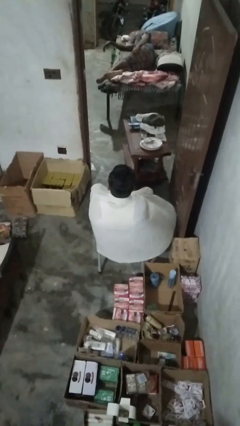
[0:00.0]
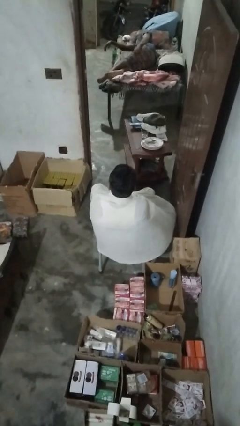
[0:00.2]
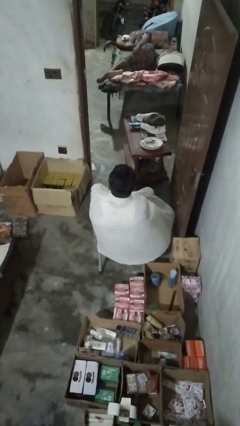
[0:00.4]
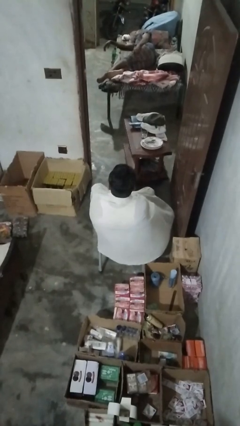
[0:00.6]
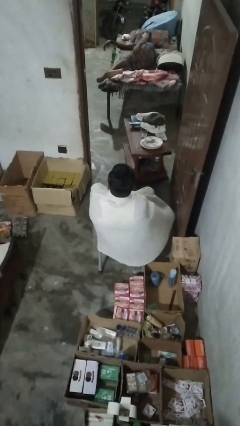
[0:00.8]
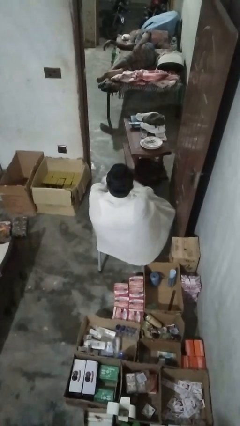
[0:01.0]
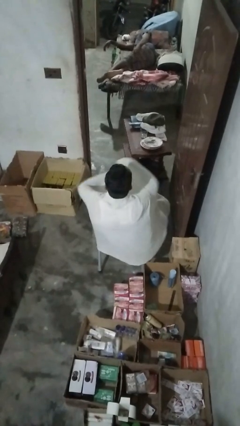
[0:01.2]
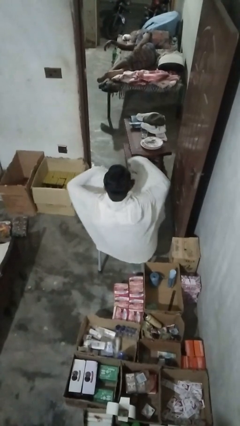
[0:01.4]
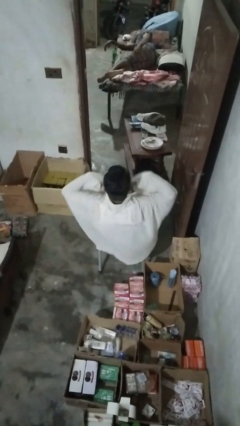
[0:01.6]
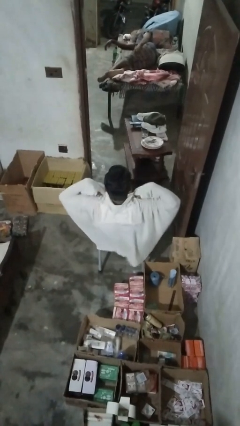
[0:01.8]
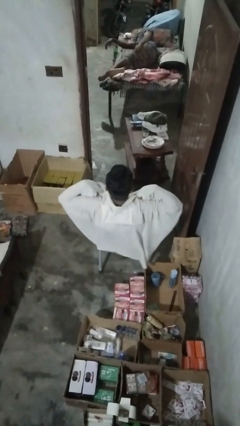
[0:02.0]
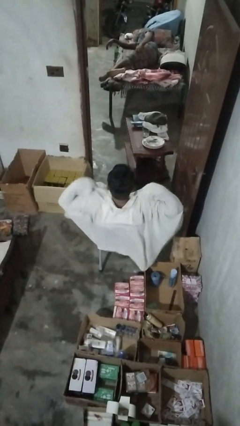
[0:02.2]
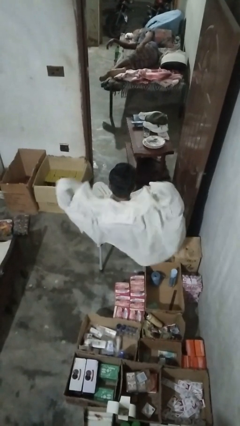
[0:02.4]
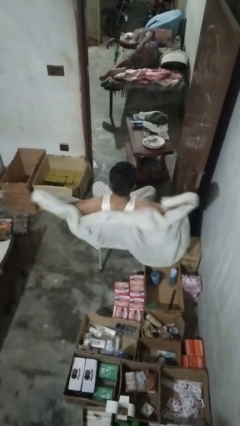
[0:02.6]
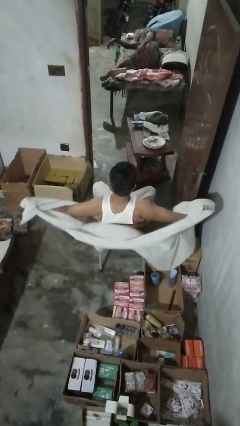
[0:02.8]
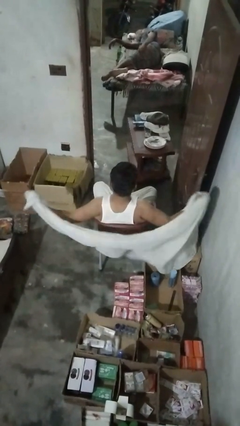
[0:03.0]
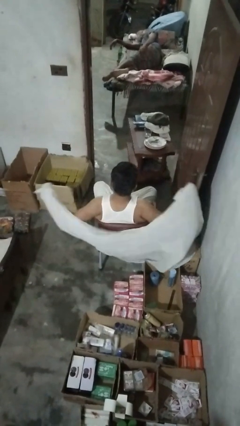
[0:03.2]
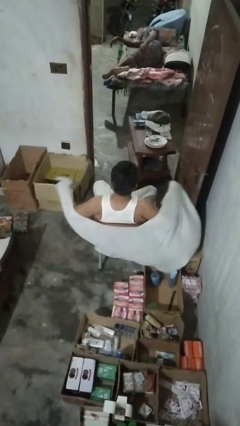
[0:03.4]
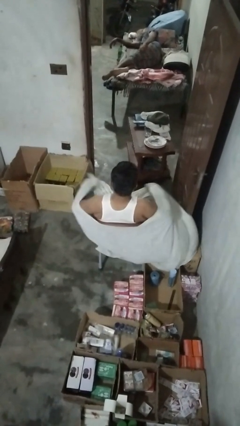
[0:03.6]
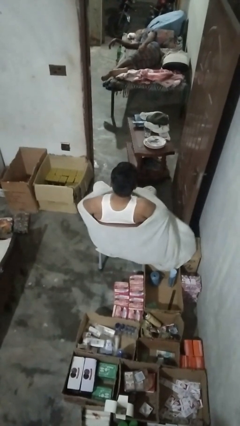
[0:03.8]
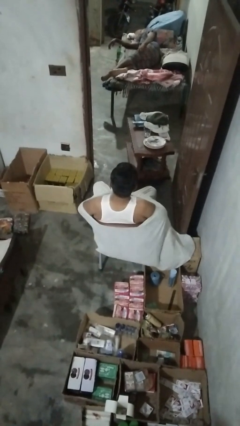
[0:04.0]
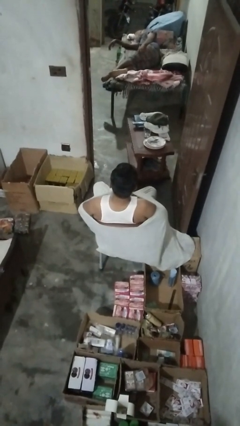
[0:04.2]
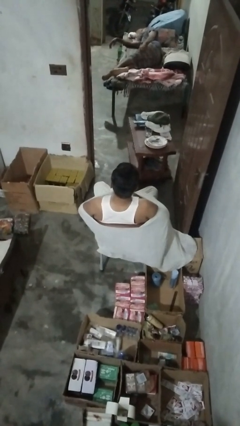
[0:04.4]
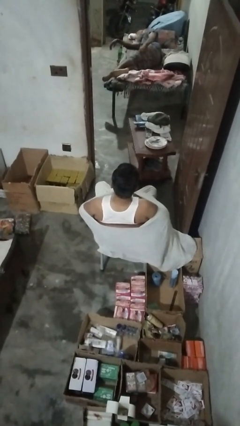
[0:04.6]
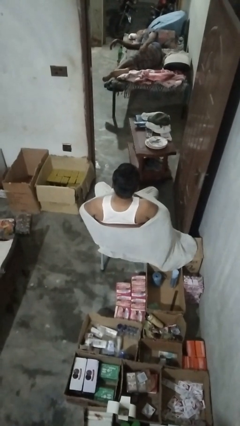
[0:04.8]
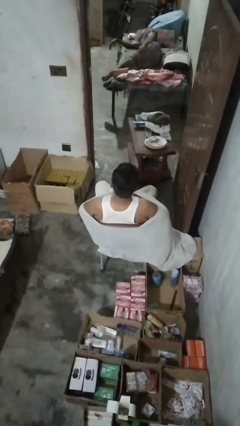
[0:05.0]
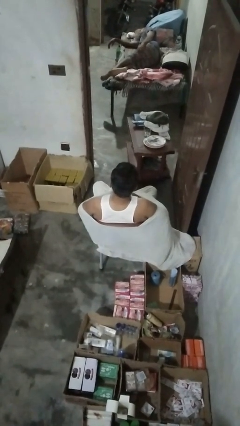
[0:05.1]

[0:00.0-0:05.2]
person uncovers with blanket

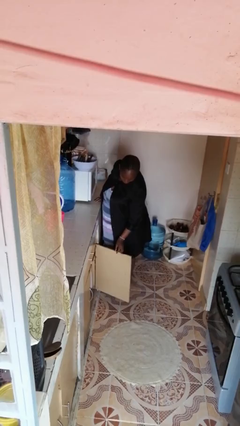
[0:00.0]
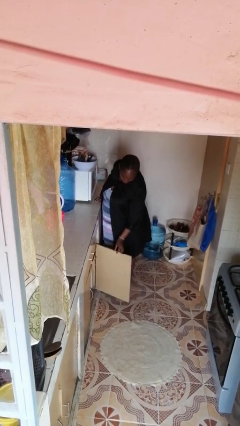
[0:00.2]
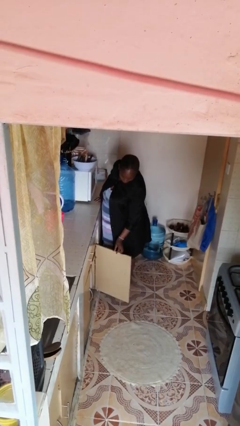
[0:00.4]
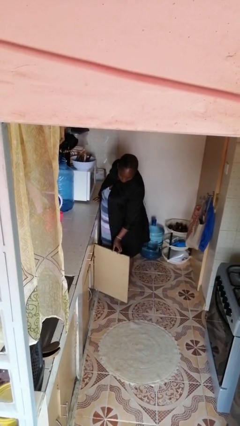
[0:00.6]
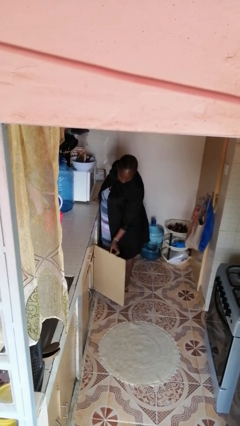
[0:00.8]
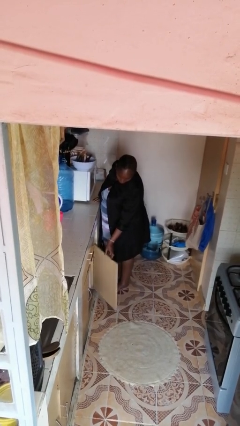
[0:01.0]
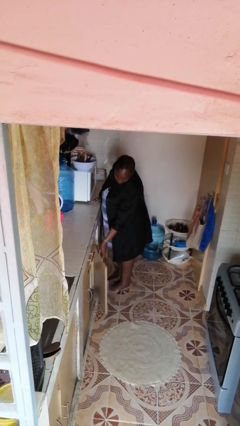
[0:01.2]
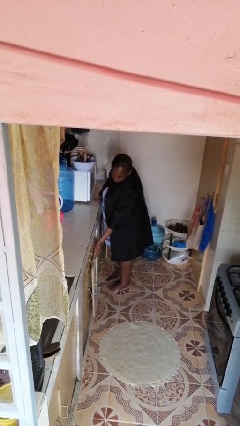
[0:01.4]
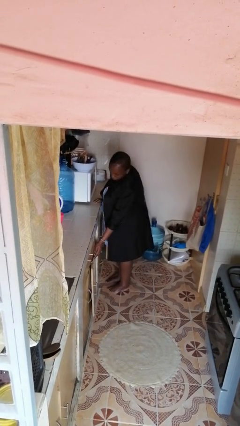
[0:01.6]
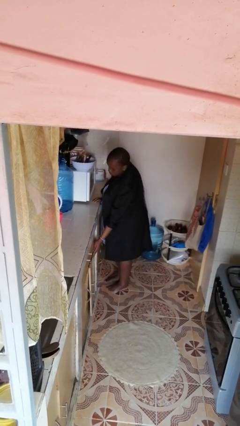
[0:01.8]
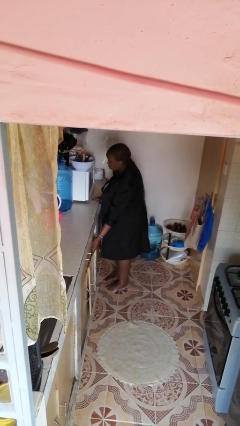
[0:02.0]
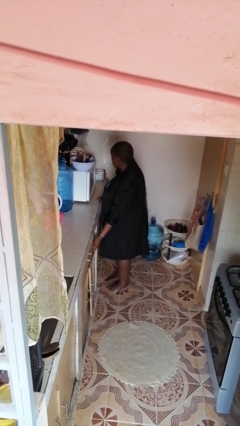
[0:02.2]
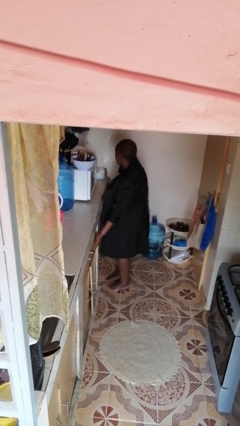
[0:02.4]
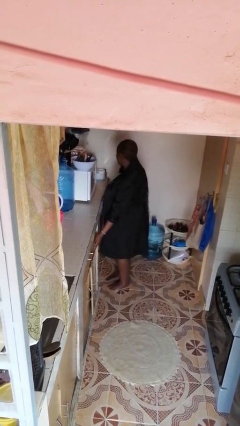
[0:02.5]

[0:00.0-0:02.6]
person closes cabinet

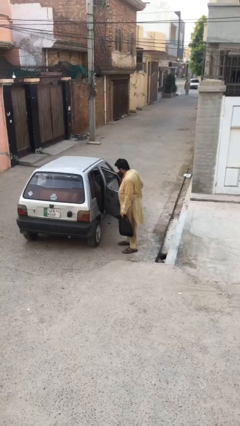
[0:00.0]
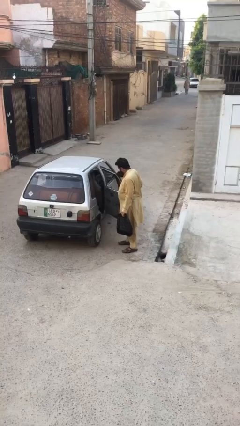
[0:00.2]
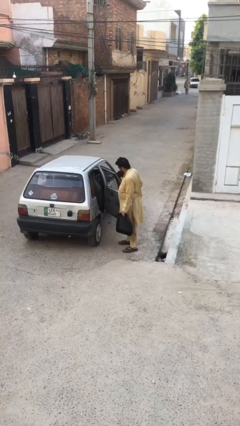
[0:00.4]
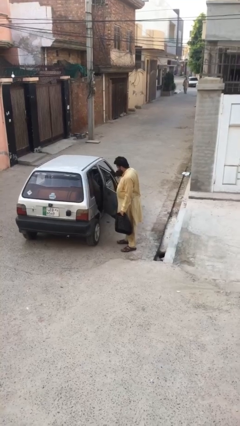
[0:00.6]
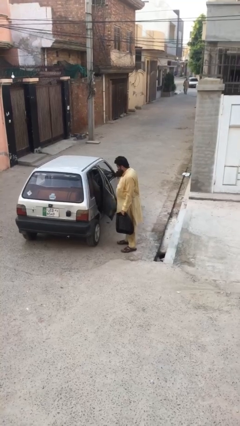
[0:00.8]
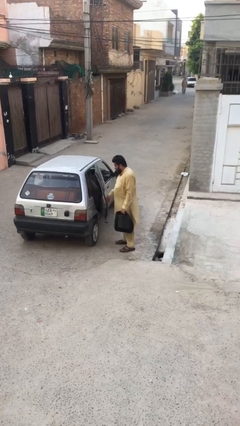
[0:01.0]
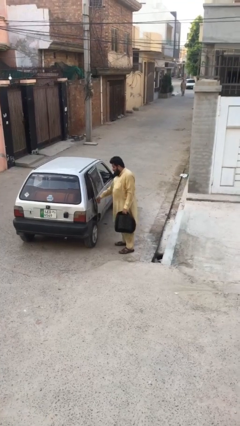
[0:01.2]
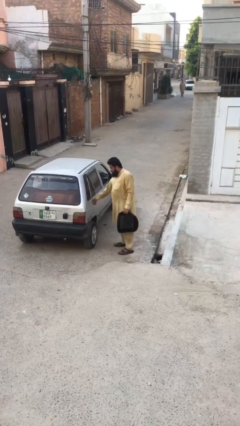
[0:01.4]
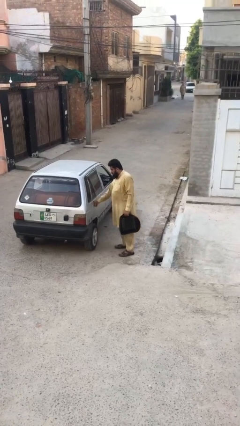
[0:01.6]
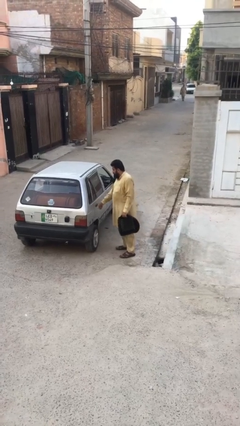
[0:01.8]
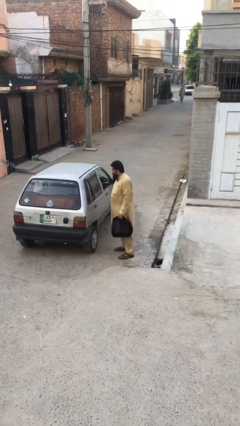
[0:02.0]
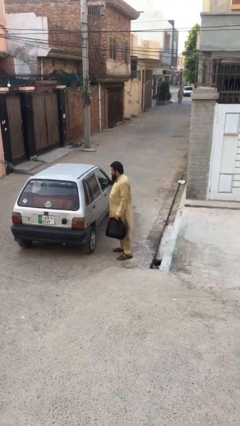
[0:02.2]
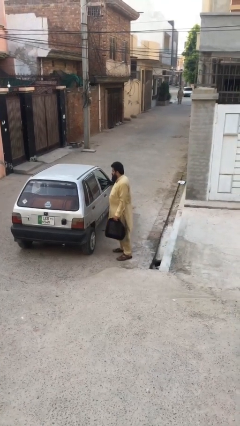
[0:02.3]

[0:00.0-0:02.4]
person closes car door

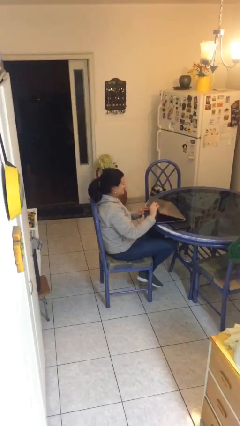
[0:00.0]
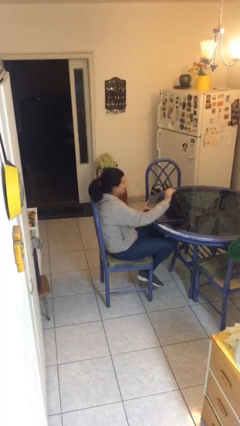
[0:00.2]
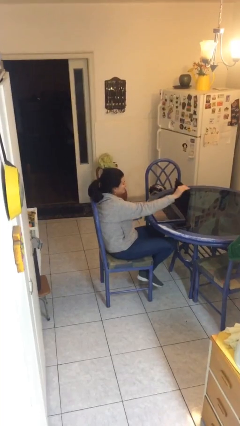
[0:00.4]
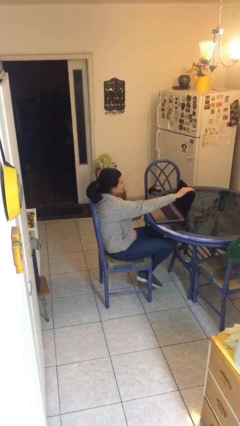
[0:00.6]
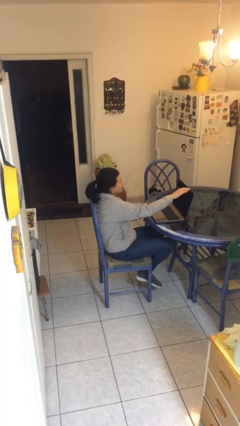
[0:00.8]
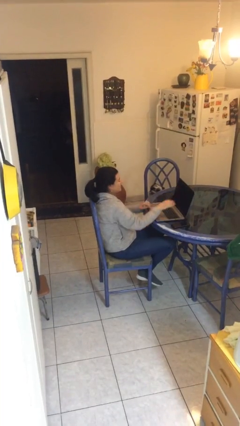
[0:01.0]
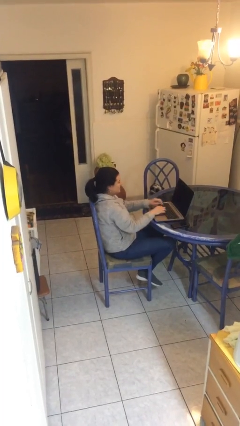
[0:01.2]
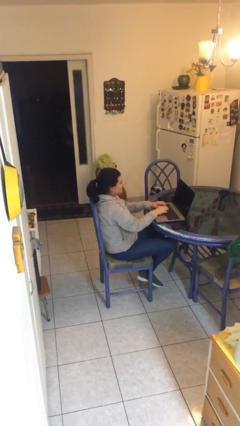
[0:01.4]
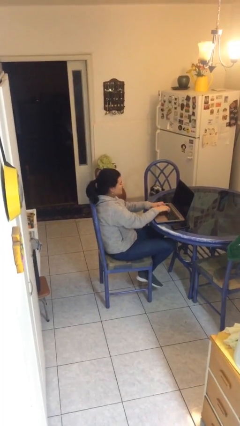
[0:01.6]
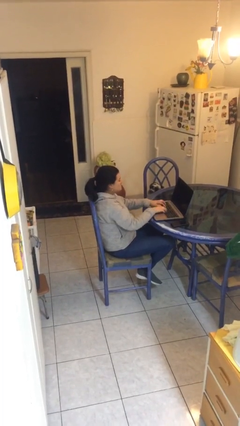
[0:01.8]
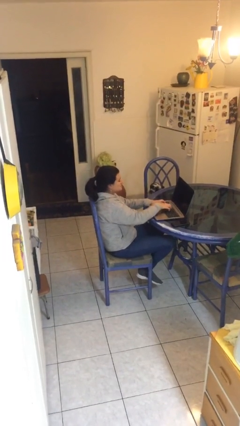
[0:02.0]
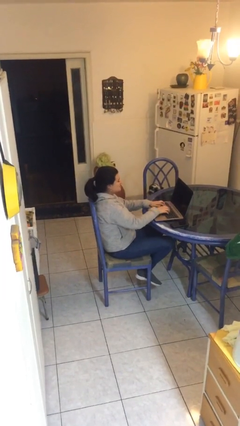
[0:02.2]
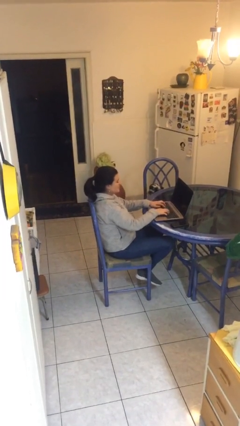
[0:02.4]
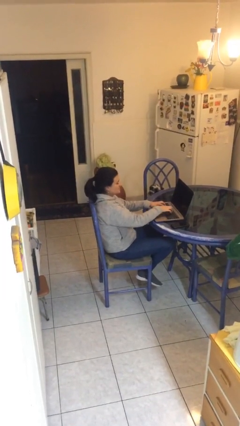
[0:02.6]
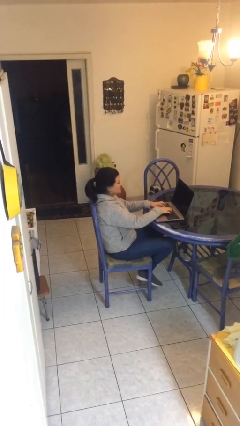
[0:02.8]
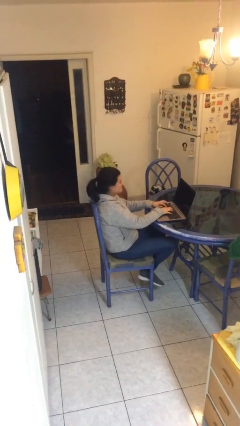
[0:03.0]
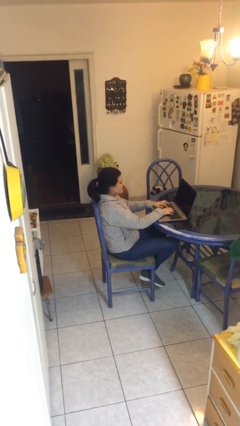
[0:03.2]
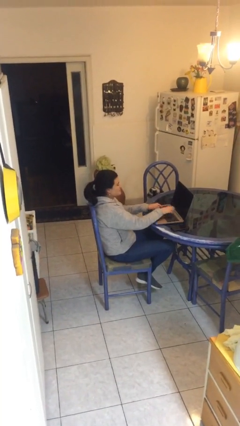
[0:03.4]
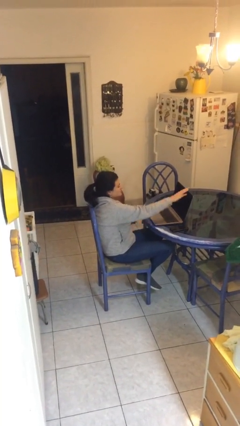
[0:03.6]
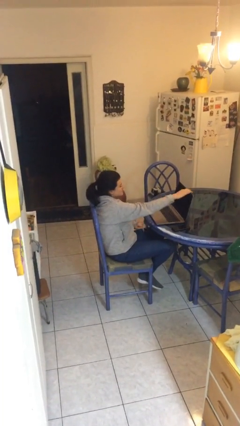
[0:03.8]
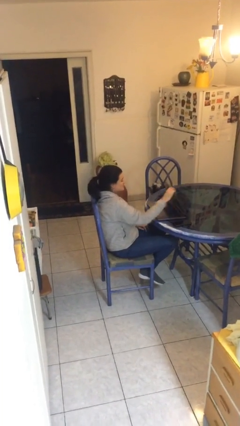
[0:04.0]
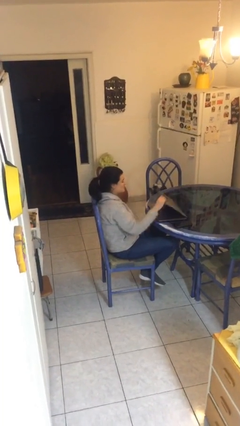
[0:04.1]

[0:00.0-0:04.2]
person interacts with laptop

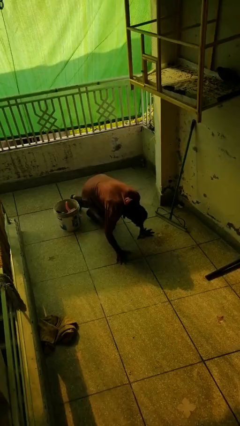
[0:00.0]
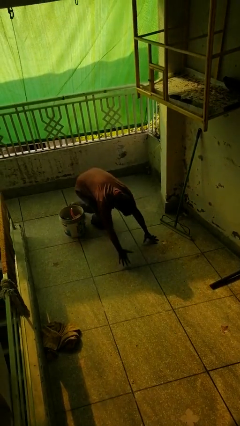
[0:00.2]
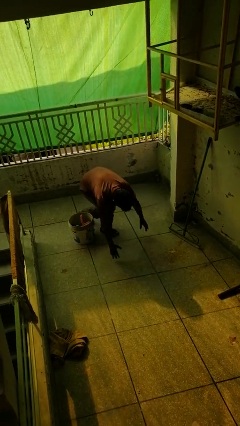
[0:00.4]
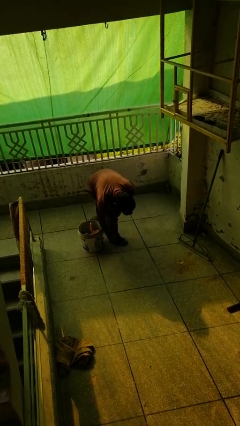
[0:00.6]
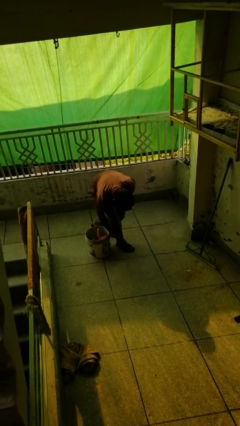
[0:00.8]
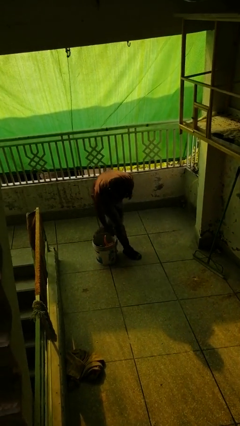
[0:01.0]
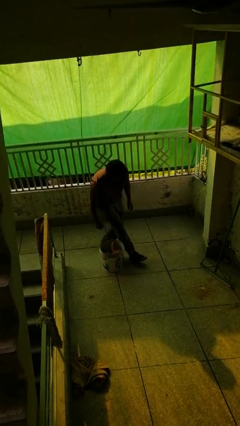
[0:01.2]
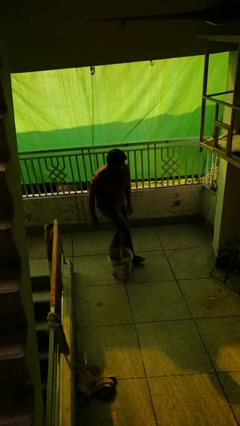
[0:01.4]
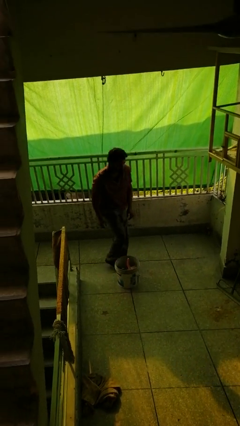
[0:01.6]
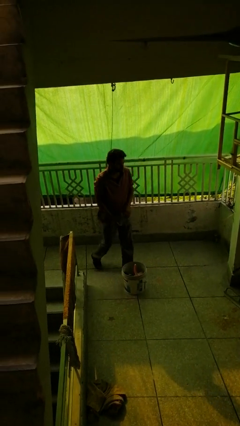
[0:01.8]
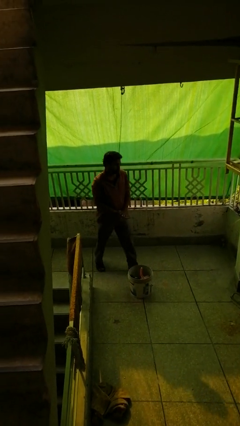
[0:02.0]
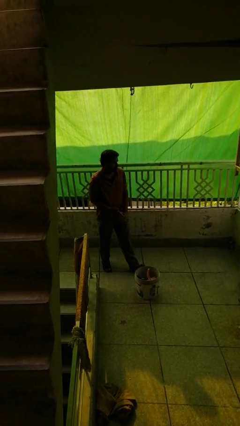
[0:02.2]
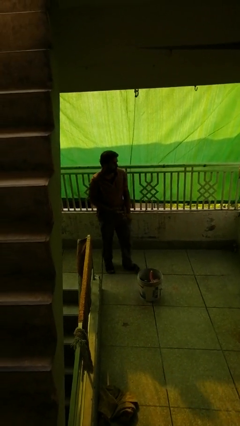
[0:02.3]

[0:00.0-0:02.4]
person stands up from floor

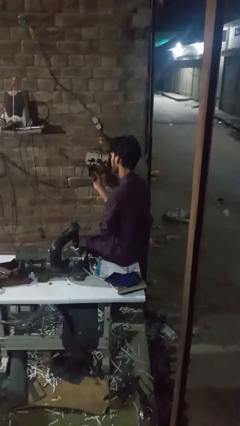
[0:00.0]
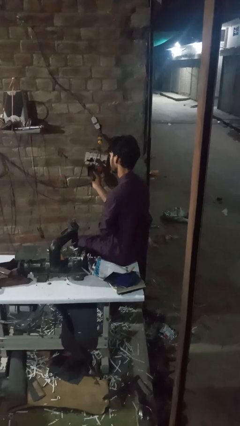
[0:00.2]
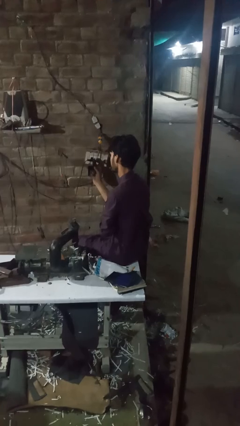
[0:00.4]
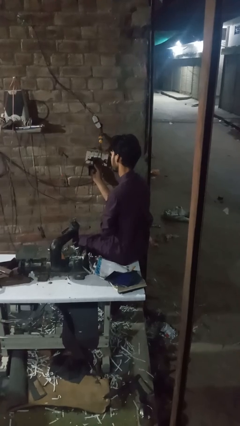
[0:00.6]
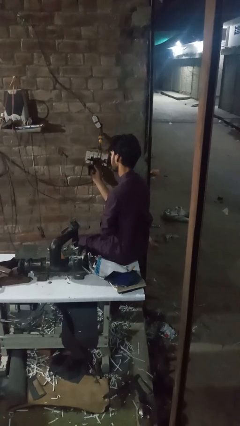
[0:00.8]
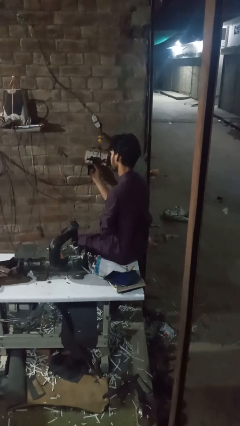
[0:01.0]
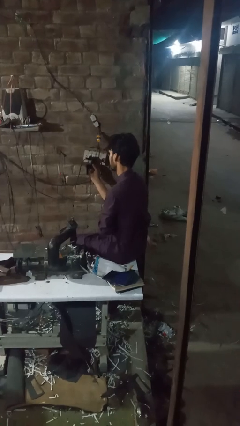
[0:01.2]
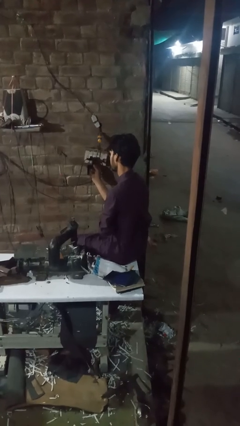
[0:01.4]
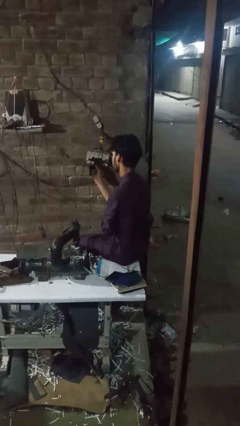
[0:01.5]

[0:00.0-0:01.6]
person plugs into electrical socket
